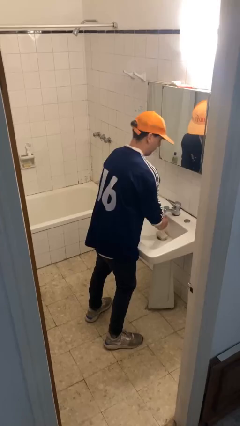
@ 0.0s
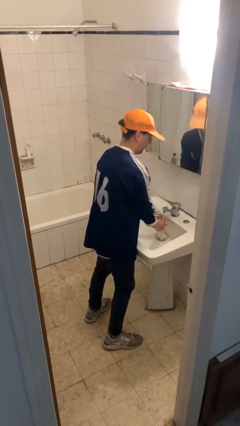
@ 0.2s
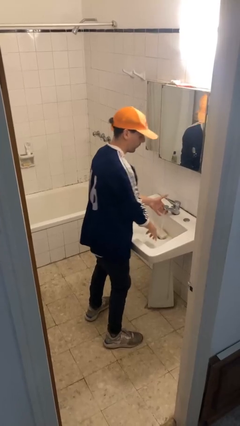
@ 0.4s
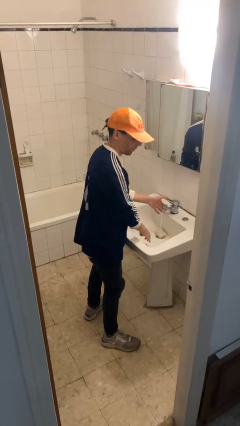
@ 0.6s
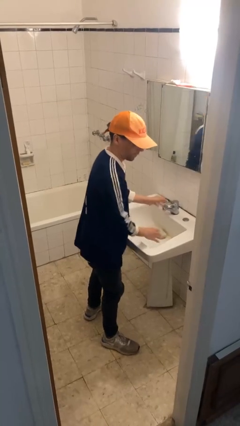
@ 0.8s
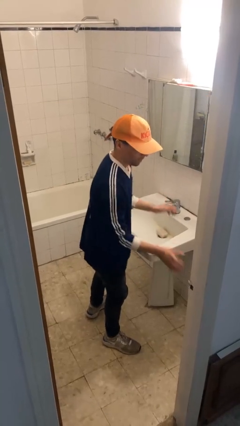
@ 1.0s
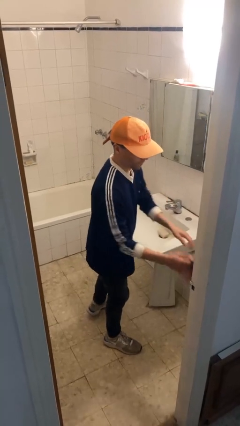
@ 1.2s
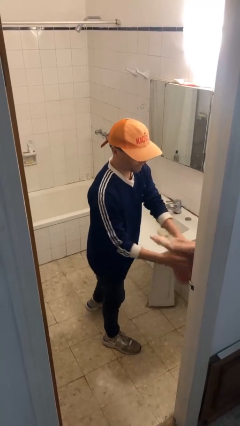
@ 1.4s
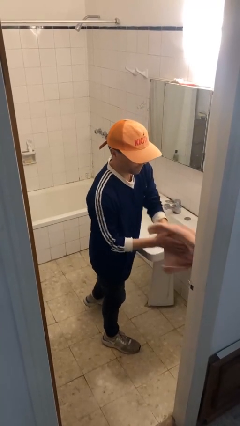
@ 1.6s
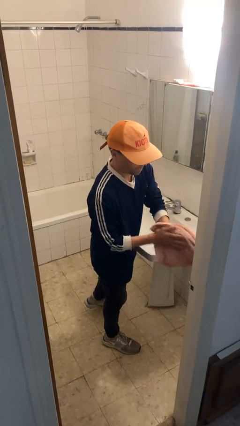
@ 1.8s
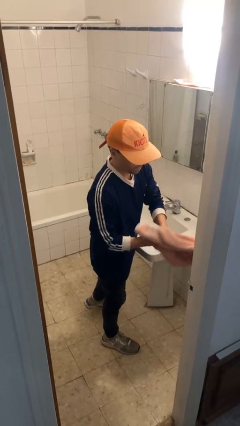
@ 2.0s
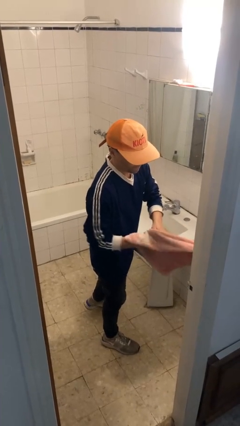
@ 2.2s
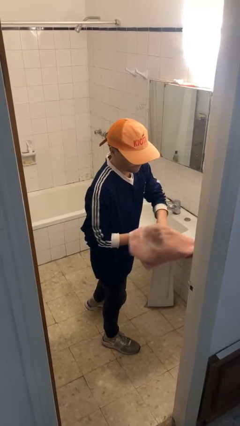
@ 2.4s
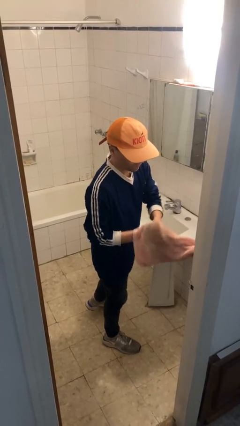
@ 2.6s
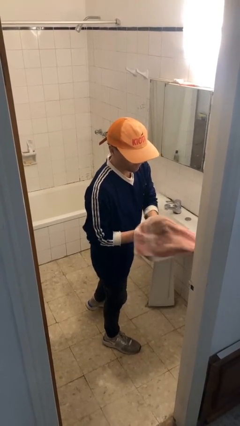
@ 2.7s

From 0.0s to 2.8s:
person dries hands with towel

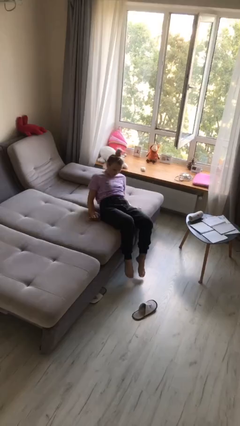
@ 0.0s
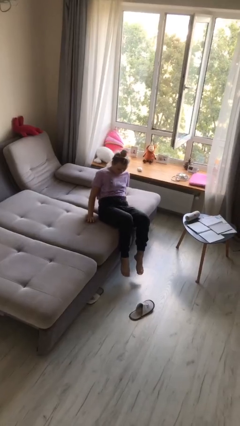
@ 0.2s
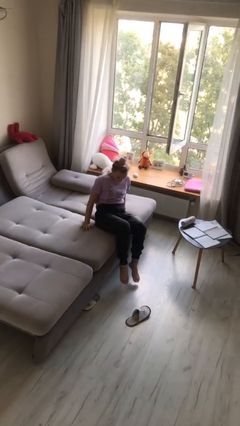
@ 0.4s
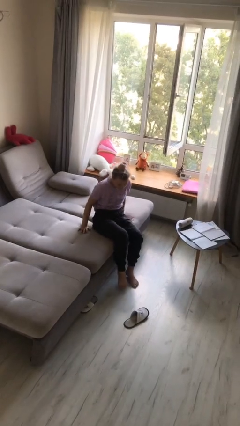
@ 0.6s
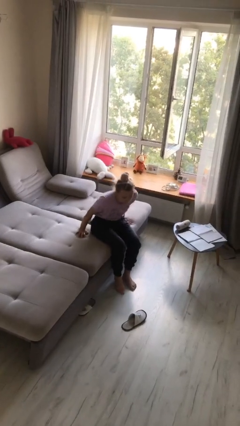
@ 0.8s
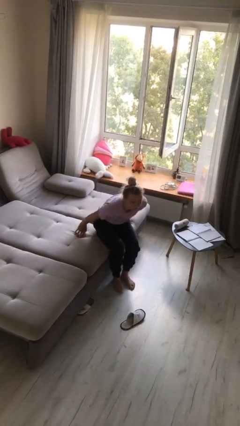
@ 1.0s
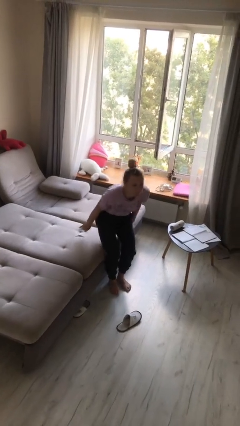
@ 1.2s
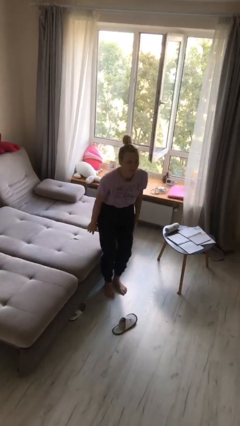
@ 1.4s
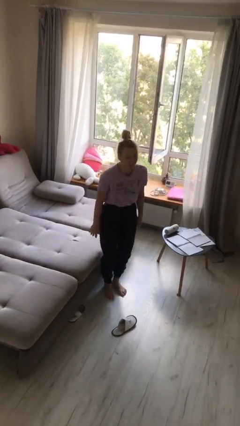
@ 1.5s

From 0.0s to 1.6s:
person stands up

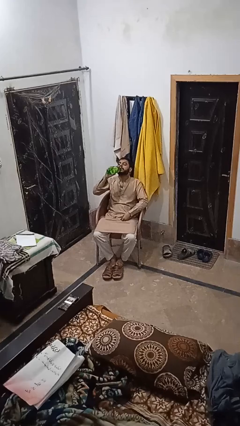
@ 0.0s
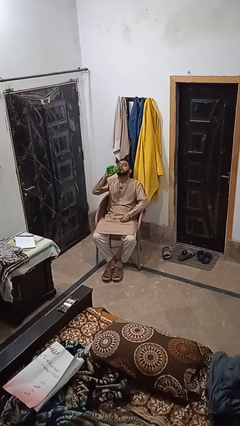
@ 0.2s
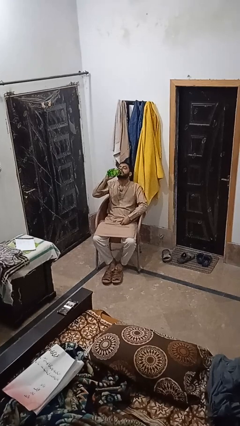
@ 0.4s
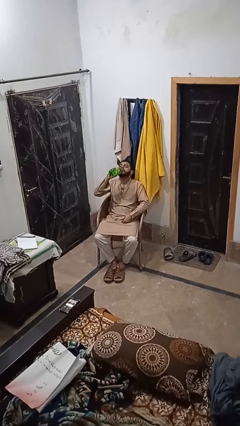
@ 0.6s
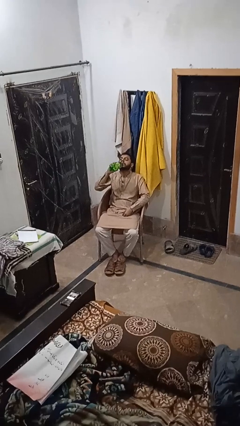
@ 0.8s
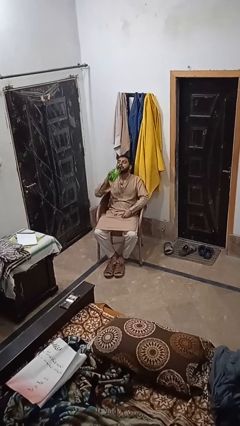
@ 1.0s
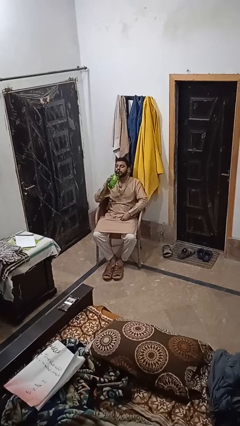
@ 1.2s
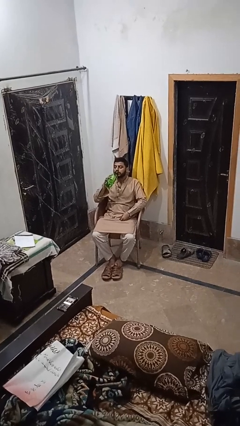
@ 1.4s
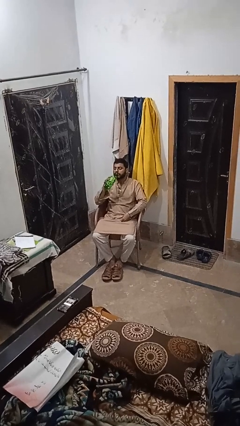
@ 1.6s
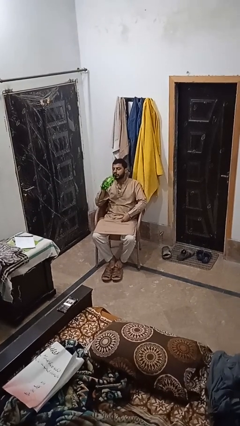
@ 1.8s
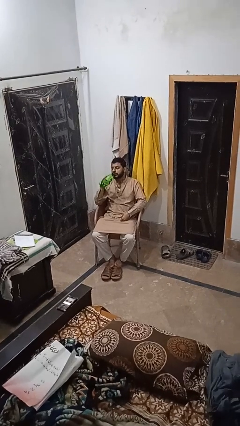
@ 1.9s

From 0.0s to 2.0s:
person drinks from bottle

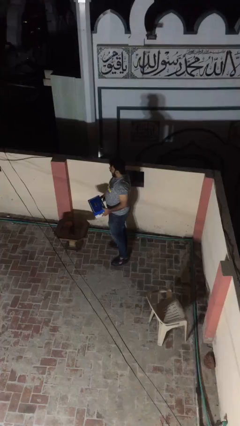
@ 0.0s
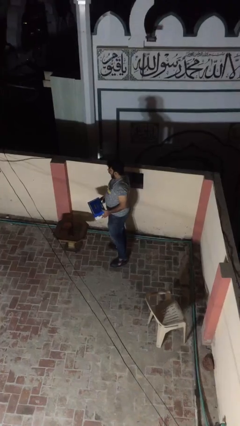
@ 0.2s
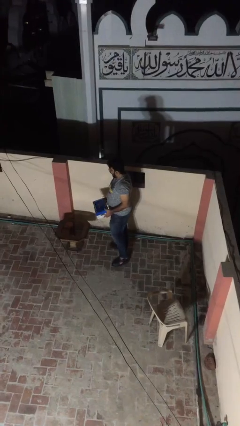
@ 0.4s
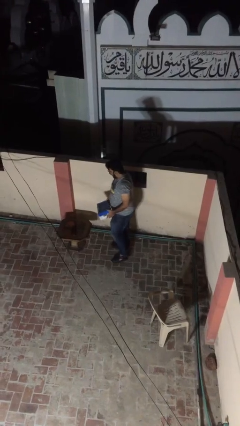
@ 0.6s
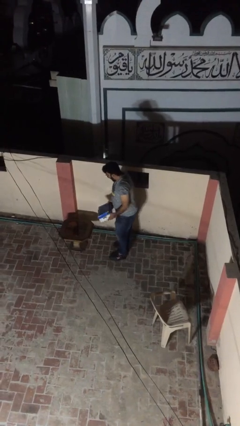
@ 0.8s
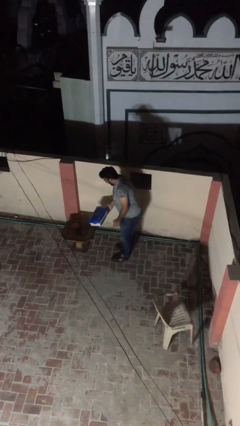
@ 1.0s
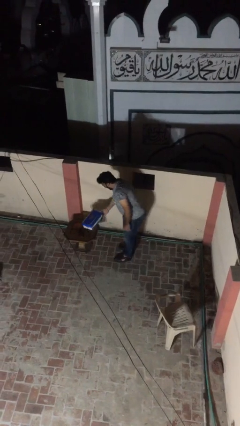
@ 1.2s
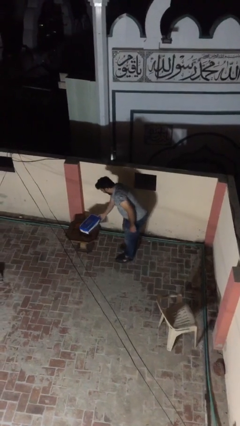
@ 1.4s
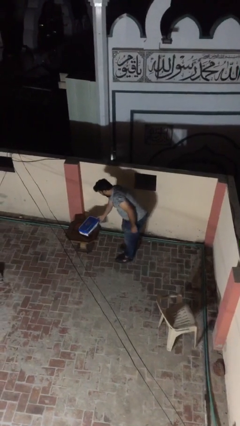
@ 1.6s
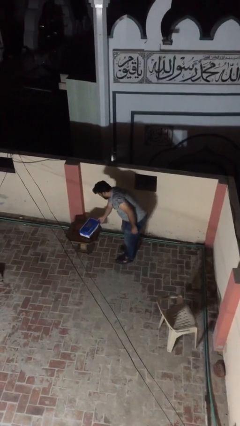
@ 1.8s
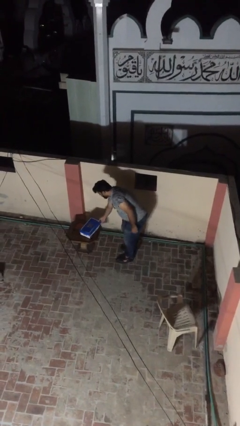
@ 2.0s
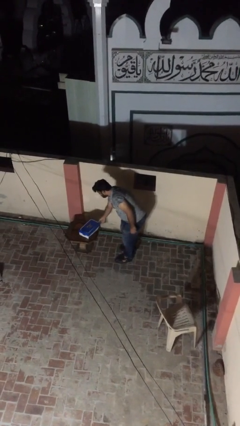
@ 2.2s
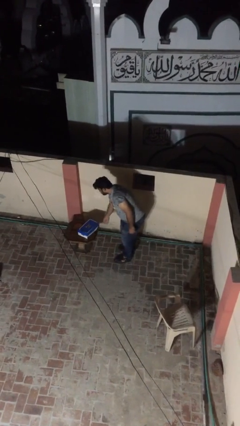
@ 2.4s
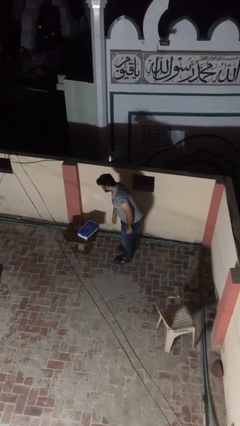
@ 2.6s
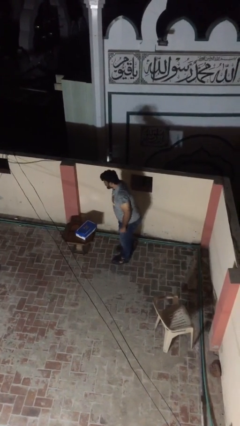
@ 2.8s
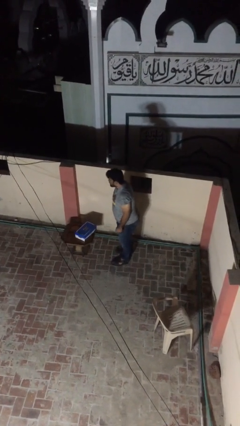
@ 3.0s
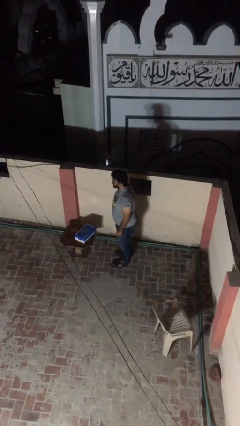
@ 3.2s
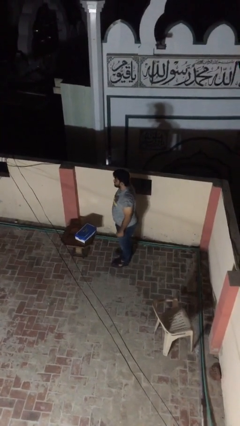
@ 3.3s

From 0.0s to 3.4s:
person puts down object on table

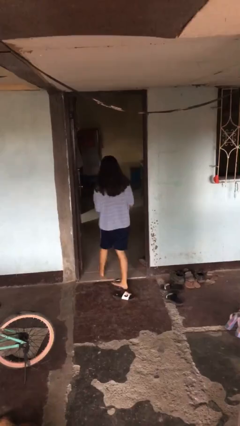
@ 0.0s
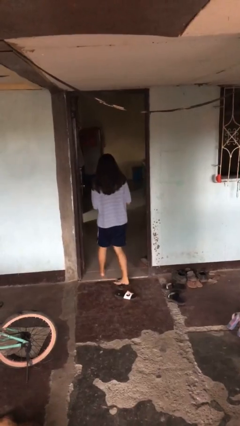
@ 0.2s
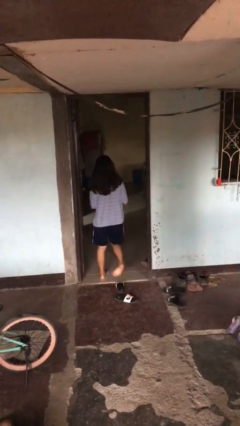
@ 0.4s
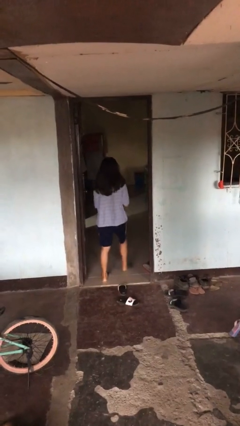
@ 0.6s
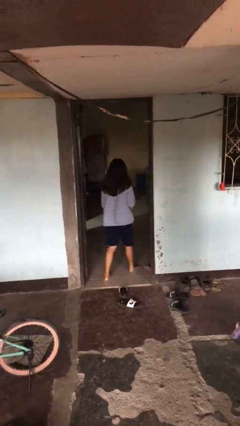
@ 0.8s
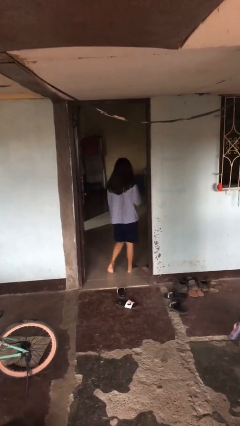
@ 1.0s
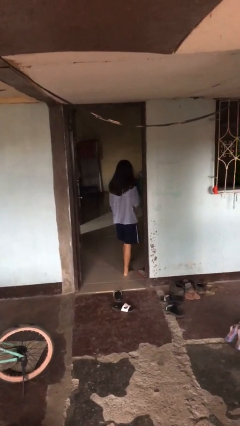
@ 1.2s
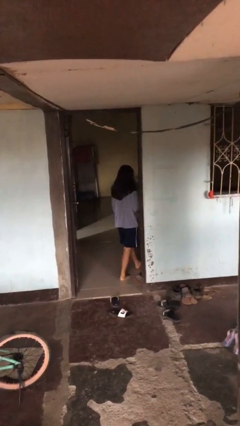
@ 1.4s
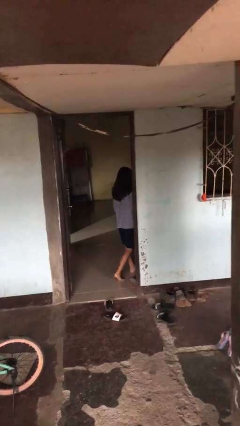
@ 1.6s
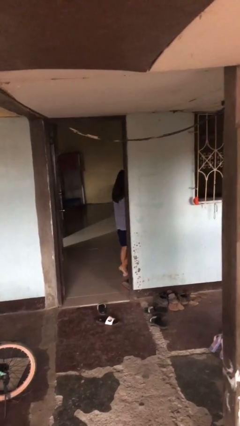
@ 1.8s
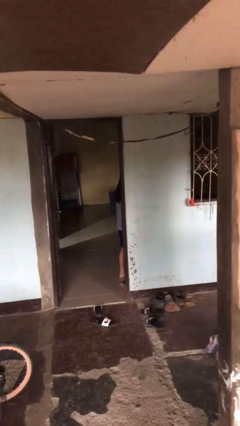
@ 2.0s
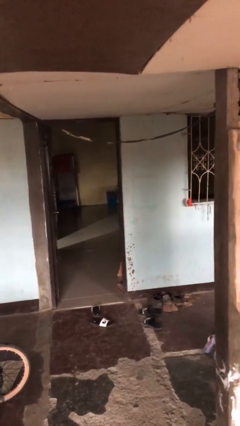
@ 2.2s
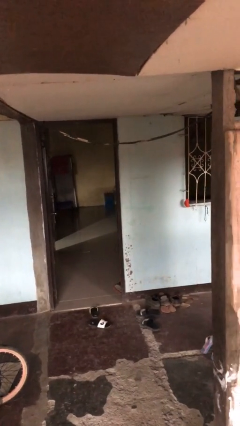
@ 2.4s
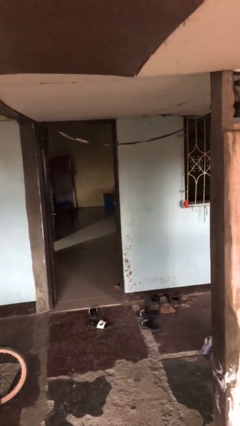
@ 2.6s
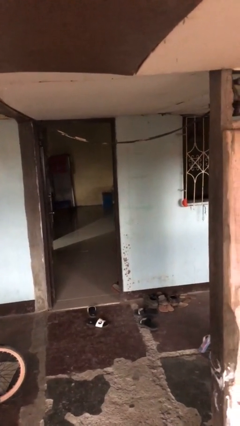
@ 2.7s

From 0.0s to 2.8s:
person exits scene through structure

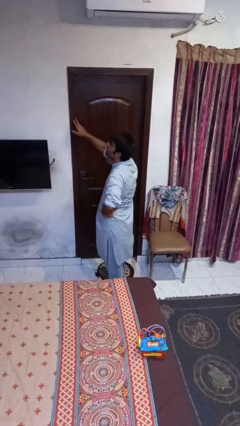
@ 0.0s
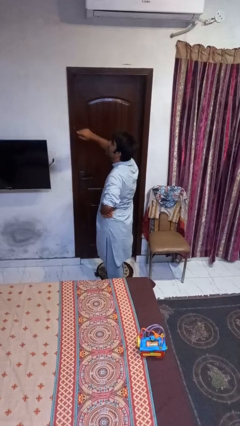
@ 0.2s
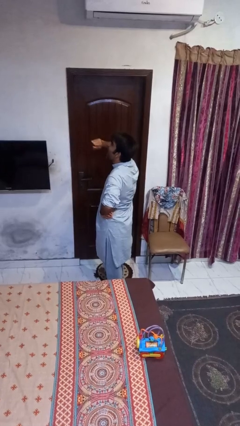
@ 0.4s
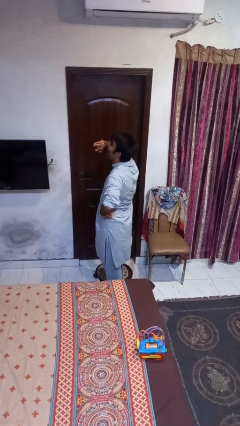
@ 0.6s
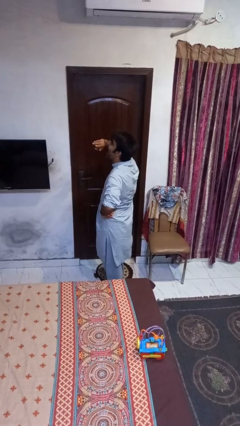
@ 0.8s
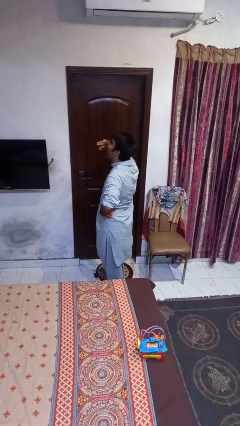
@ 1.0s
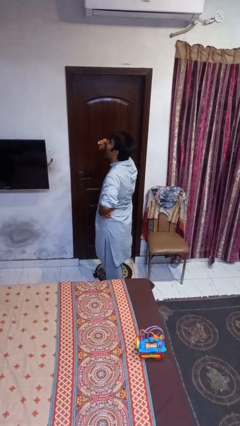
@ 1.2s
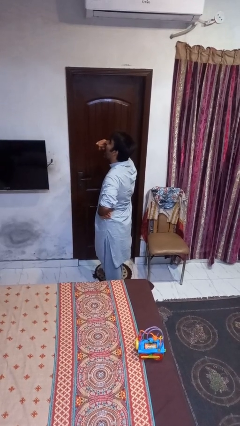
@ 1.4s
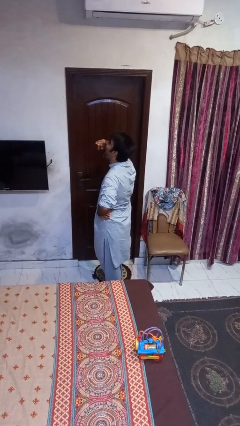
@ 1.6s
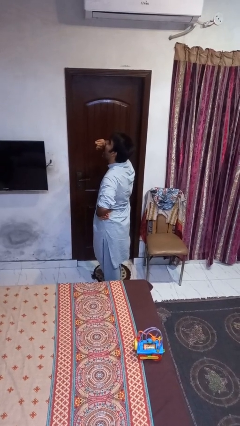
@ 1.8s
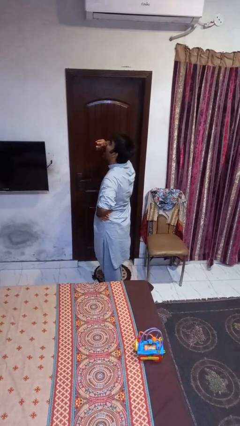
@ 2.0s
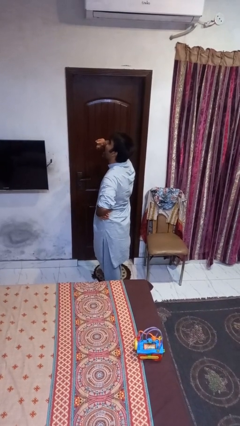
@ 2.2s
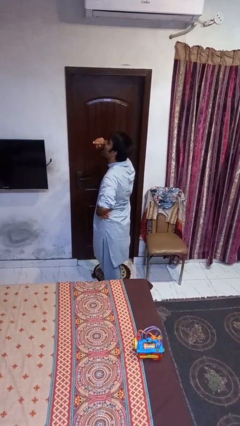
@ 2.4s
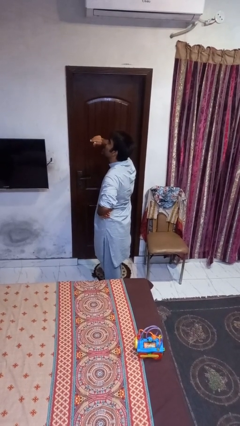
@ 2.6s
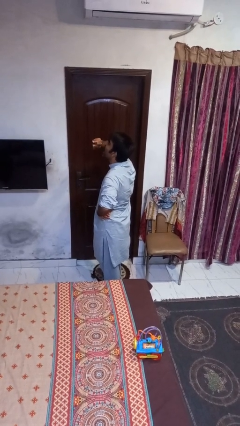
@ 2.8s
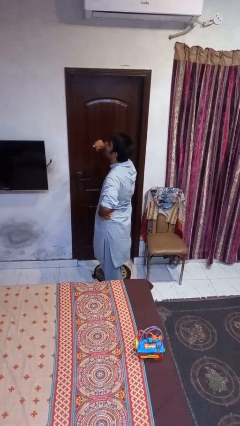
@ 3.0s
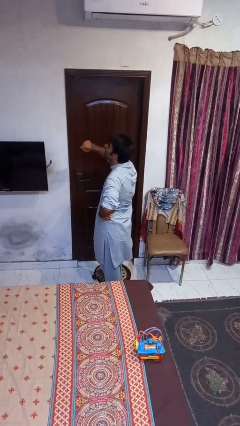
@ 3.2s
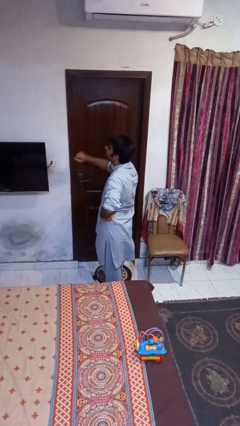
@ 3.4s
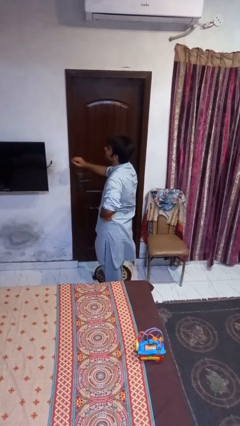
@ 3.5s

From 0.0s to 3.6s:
person yawns

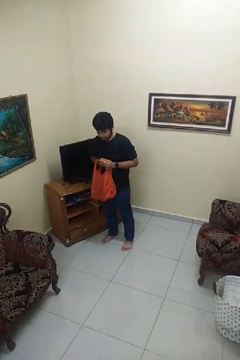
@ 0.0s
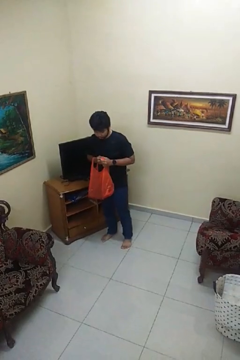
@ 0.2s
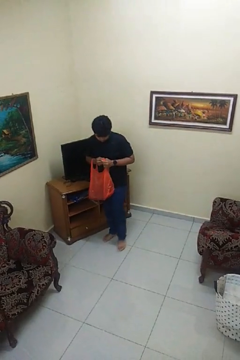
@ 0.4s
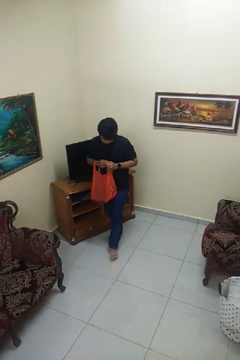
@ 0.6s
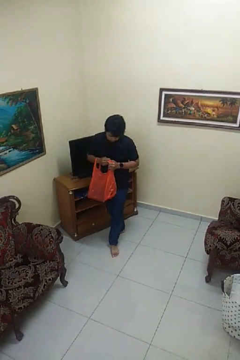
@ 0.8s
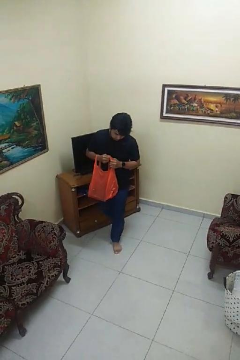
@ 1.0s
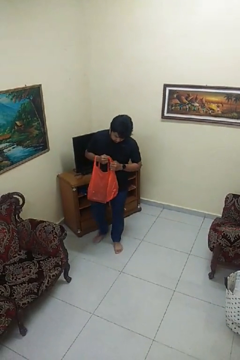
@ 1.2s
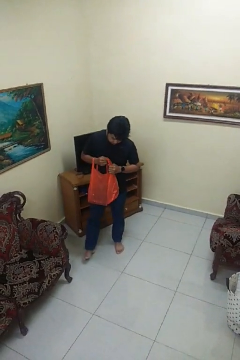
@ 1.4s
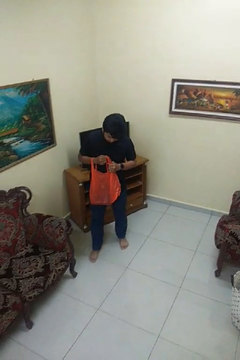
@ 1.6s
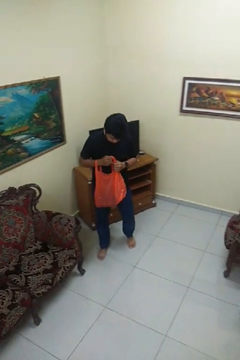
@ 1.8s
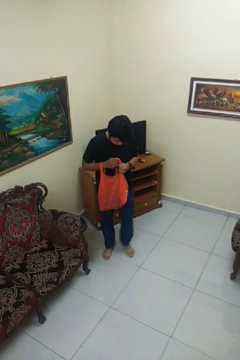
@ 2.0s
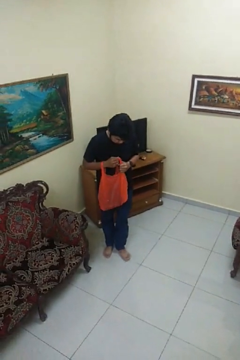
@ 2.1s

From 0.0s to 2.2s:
person carries groceries
